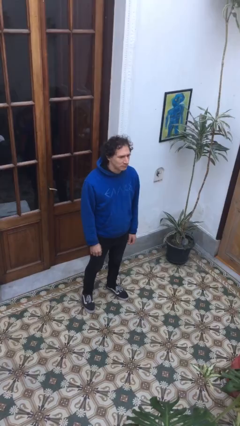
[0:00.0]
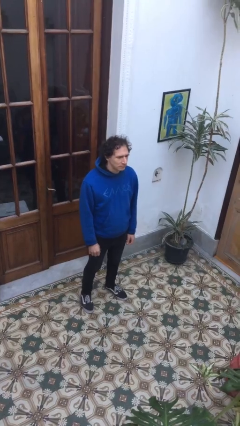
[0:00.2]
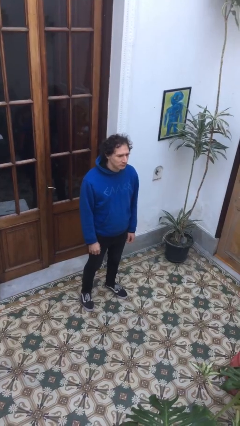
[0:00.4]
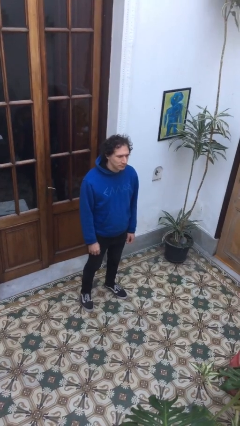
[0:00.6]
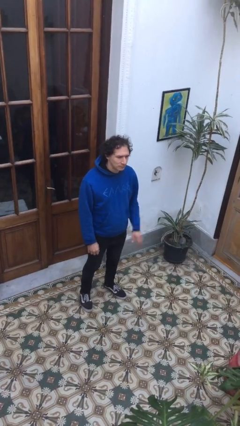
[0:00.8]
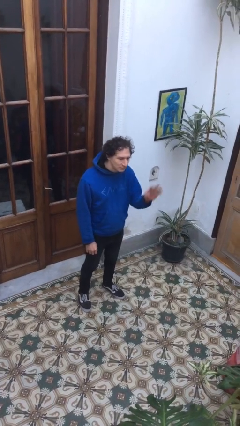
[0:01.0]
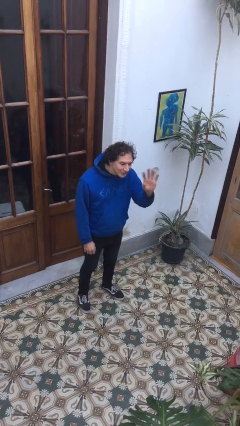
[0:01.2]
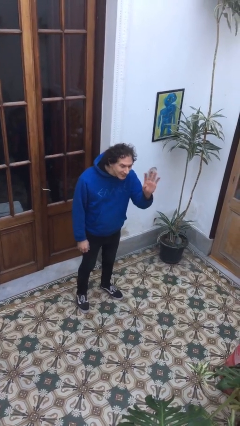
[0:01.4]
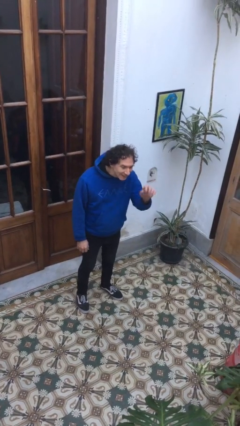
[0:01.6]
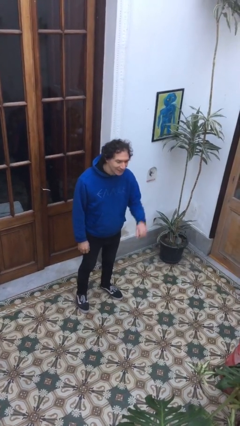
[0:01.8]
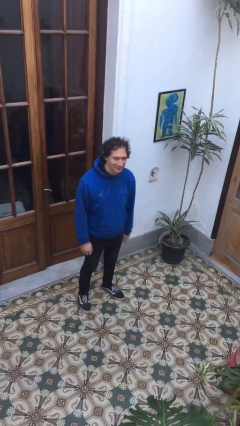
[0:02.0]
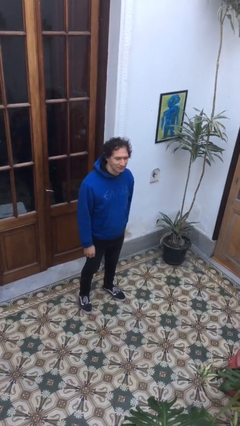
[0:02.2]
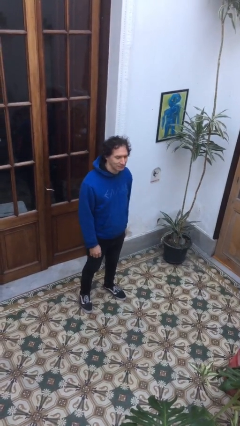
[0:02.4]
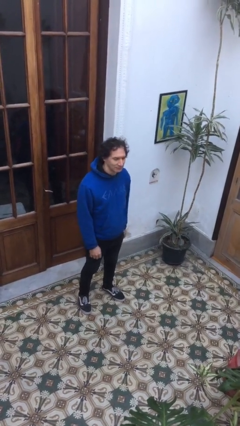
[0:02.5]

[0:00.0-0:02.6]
person waves at person

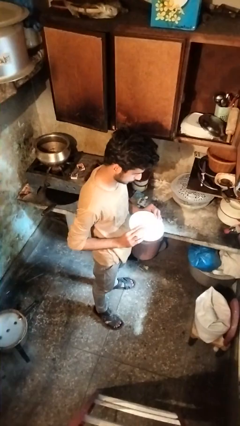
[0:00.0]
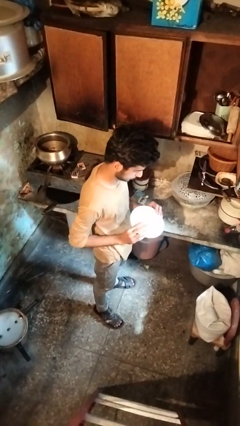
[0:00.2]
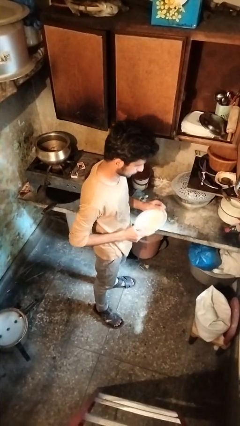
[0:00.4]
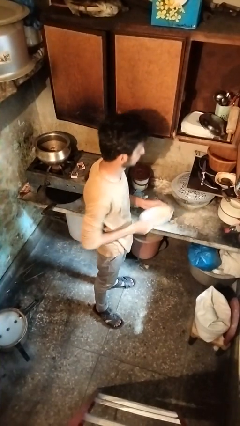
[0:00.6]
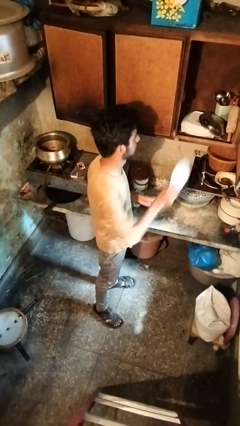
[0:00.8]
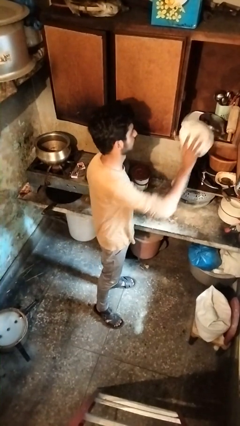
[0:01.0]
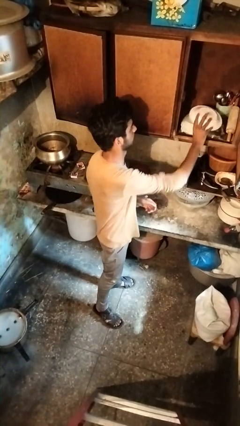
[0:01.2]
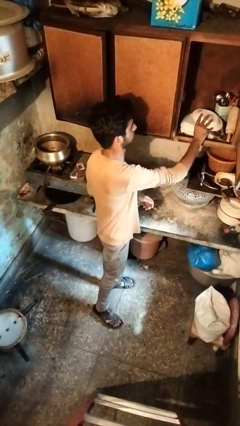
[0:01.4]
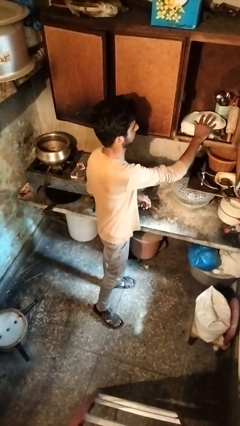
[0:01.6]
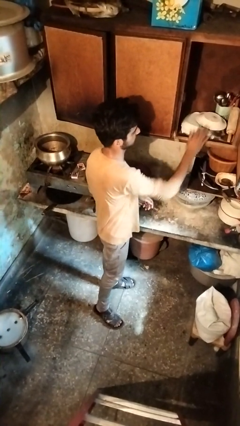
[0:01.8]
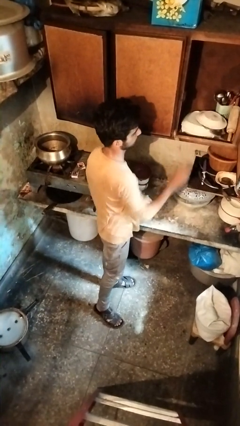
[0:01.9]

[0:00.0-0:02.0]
person puts down object into cabinet

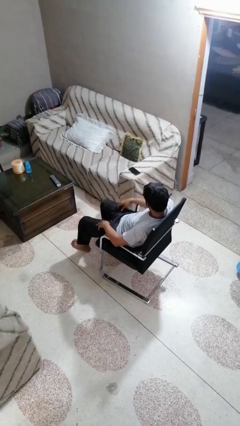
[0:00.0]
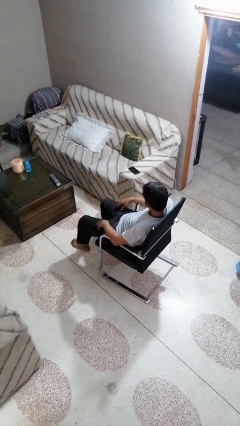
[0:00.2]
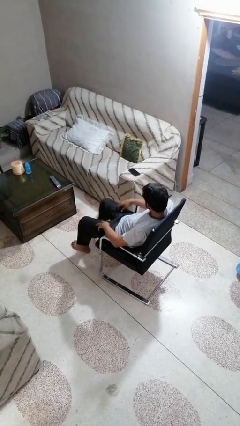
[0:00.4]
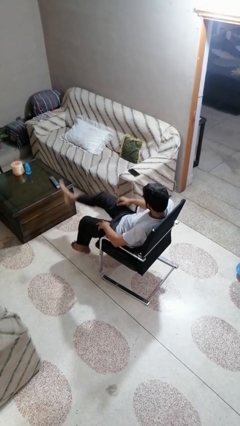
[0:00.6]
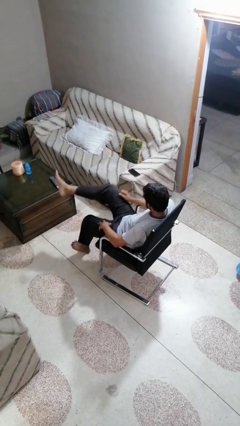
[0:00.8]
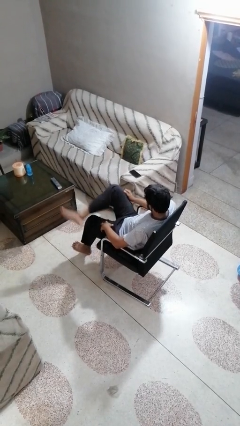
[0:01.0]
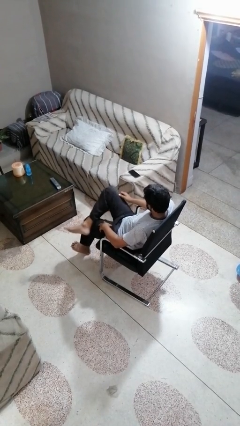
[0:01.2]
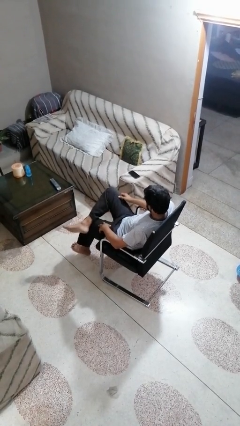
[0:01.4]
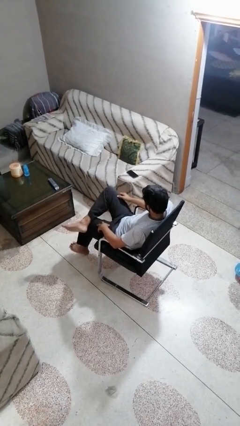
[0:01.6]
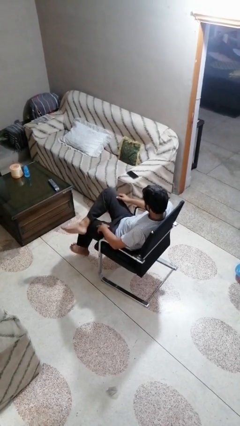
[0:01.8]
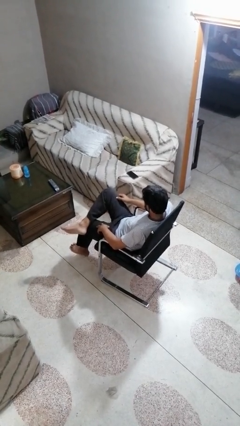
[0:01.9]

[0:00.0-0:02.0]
person crosses legs

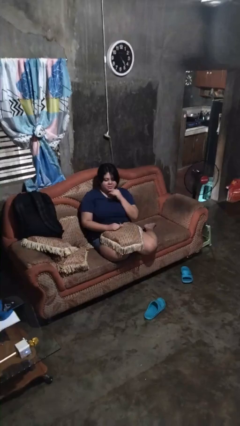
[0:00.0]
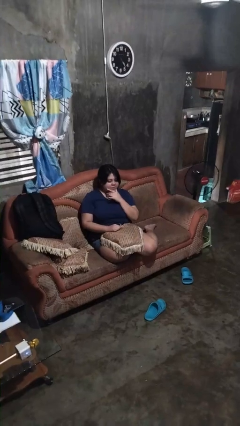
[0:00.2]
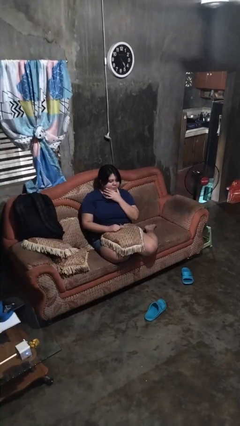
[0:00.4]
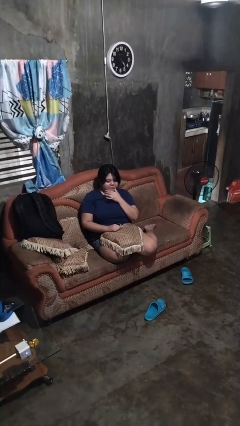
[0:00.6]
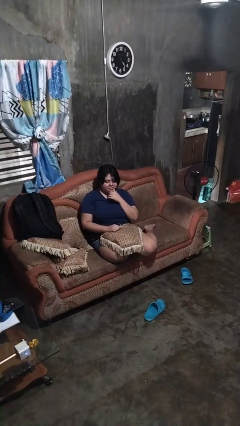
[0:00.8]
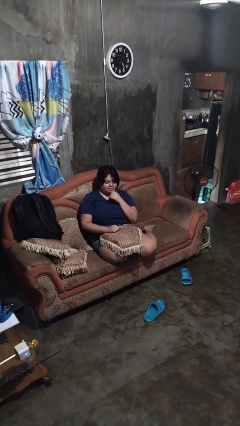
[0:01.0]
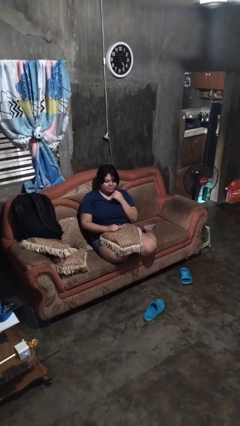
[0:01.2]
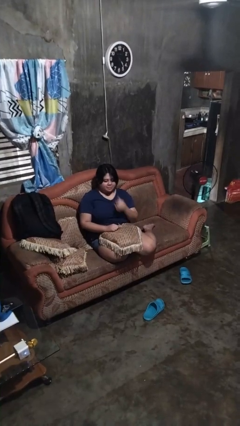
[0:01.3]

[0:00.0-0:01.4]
person strokes chin

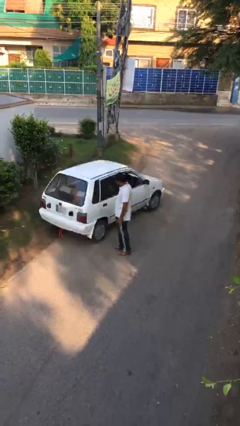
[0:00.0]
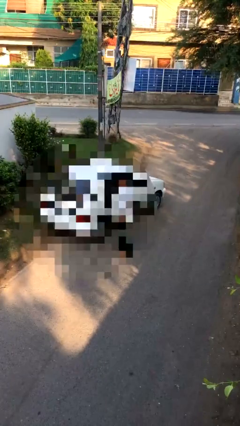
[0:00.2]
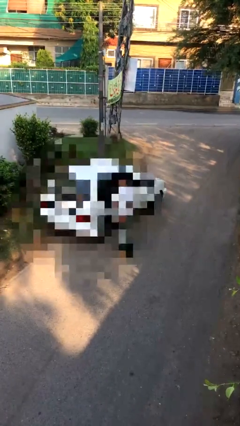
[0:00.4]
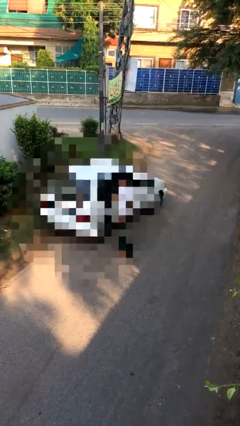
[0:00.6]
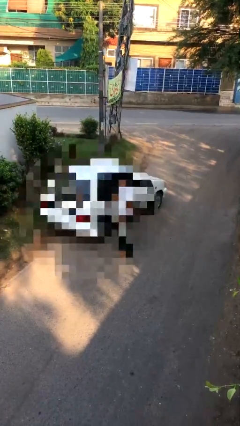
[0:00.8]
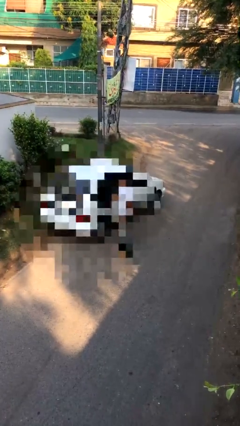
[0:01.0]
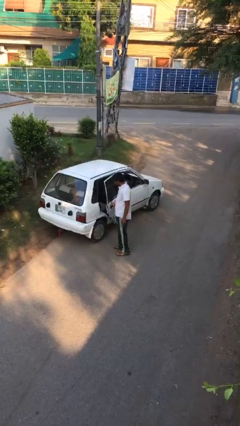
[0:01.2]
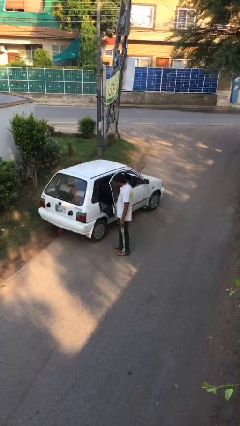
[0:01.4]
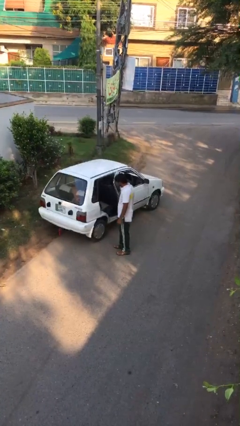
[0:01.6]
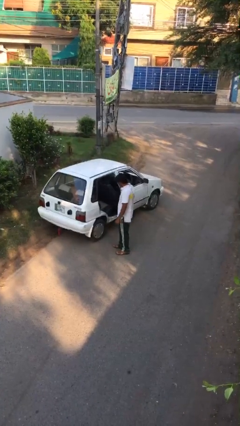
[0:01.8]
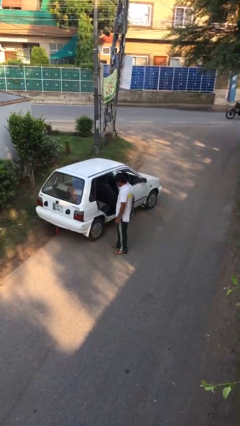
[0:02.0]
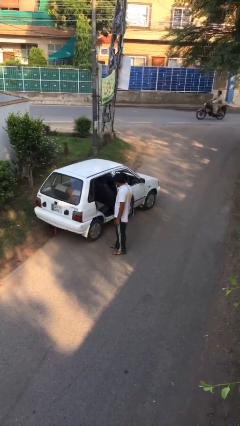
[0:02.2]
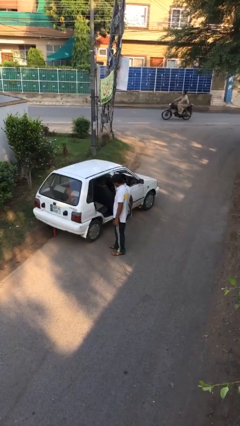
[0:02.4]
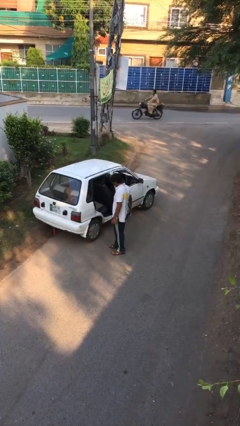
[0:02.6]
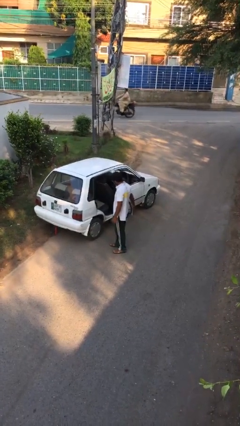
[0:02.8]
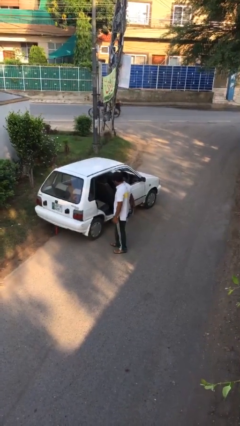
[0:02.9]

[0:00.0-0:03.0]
person opens car door

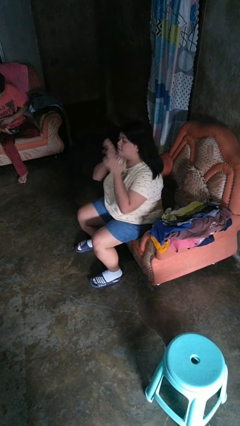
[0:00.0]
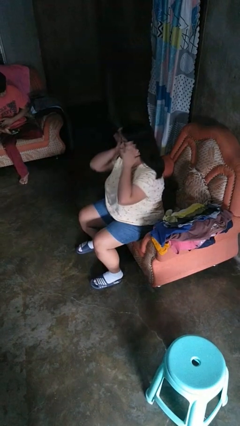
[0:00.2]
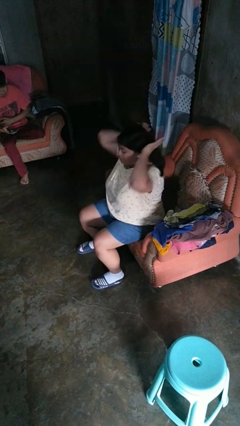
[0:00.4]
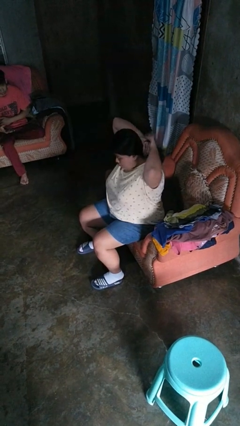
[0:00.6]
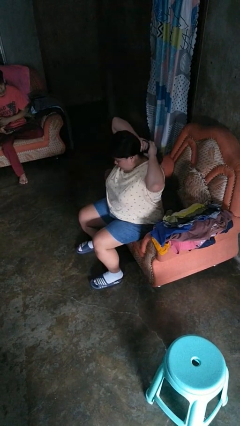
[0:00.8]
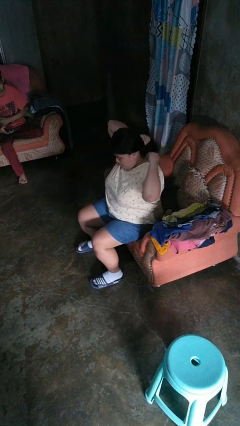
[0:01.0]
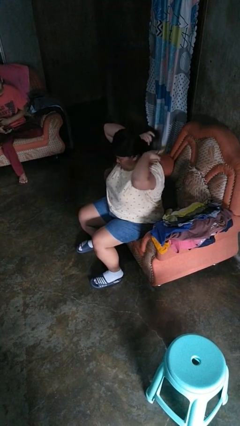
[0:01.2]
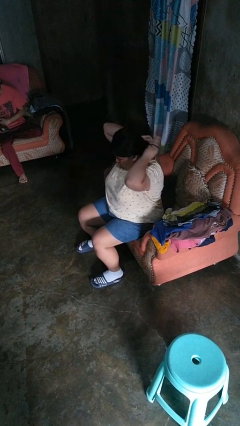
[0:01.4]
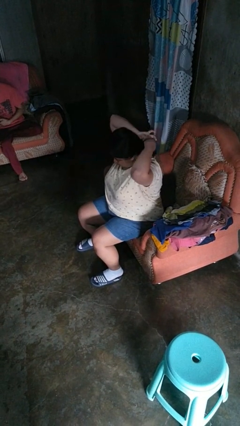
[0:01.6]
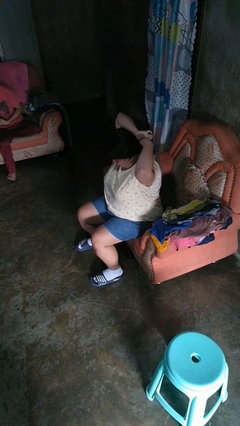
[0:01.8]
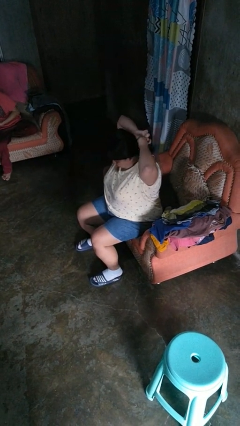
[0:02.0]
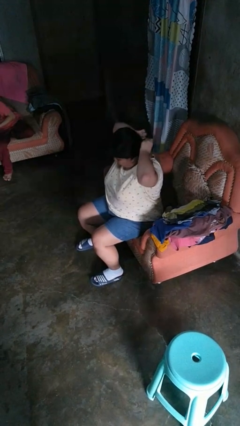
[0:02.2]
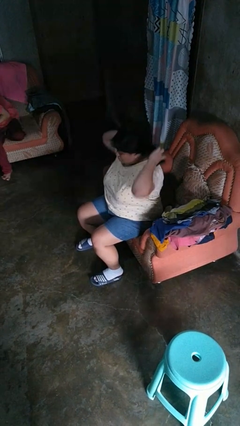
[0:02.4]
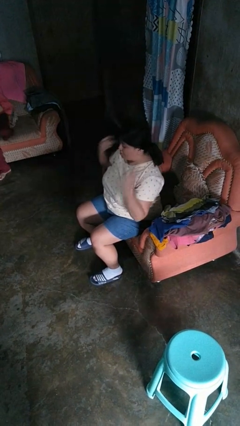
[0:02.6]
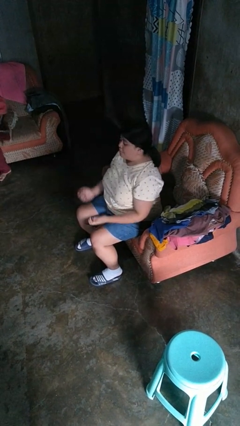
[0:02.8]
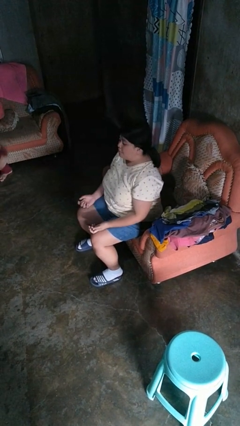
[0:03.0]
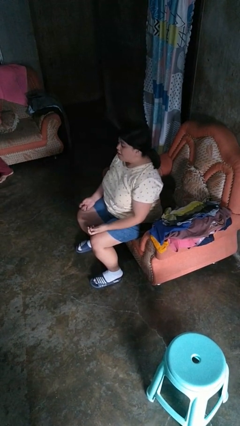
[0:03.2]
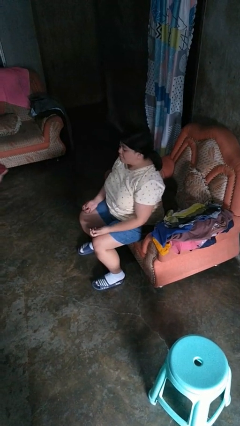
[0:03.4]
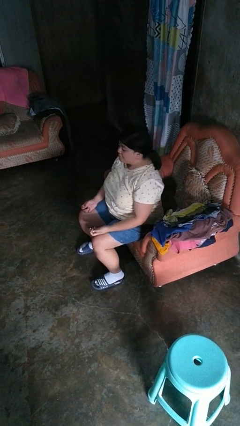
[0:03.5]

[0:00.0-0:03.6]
person puts hair in ponytail

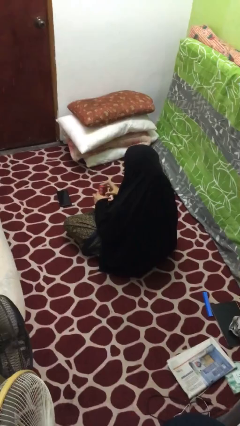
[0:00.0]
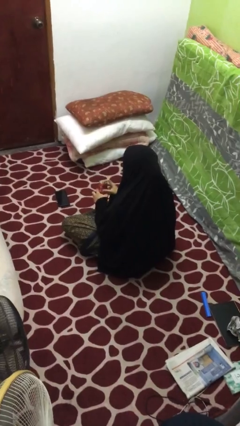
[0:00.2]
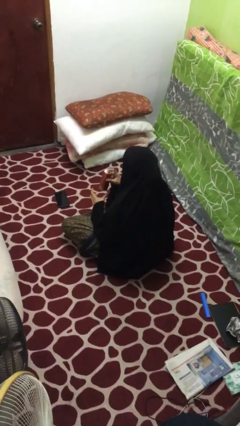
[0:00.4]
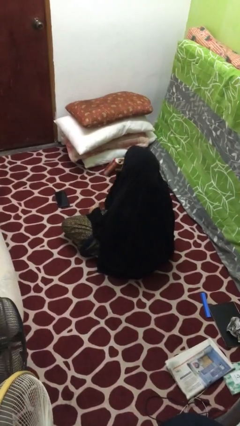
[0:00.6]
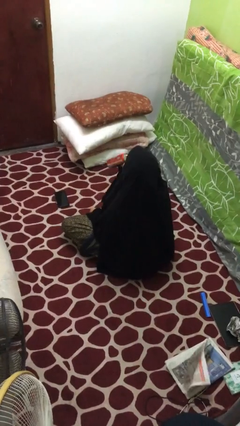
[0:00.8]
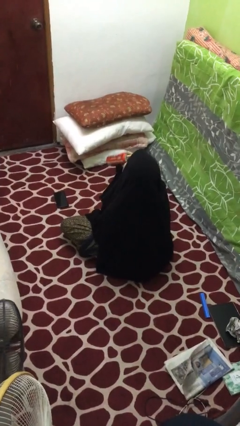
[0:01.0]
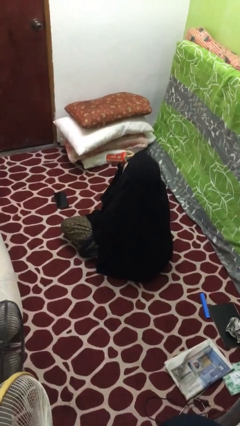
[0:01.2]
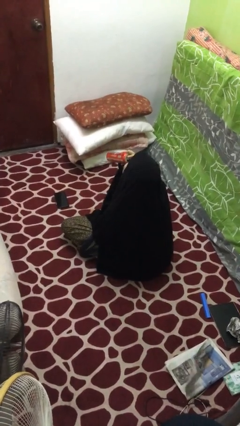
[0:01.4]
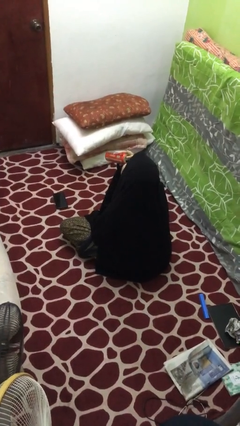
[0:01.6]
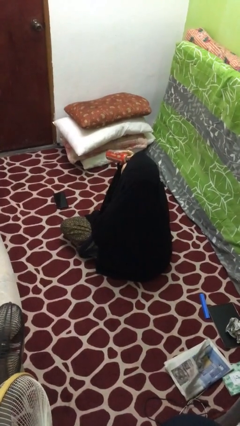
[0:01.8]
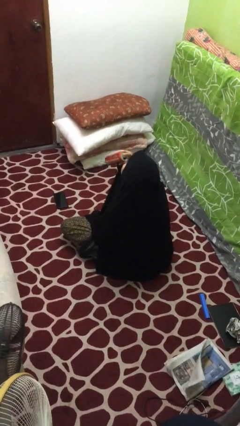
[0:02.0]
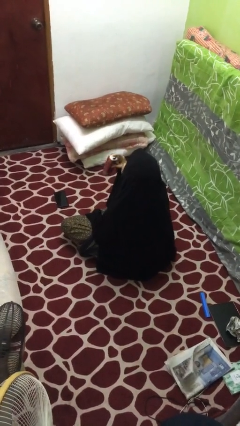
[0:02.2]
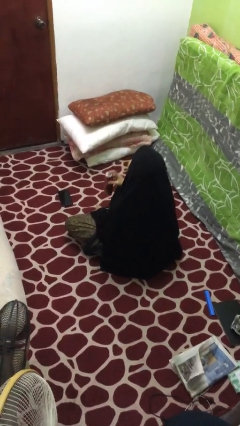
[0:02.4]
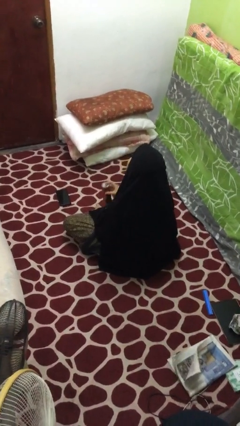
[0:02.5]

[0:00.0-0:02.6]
person drinks from beverage can

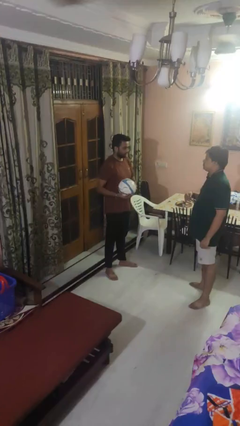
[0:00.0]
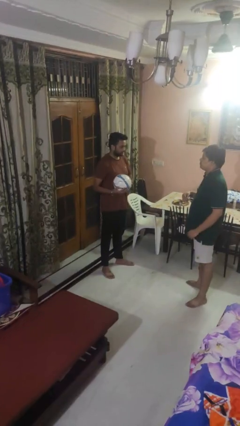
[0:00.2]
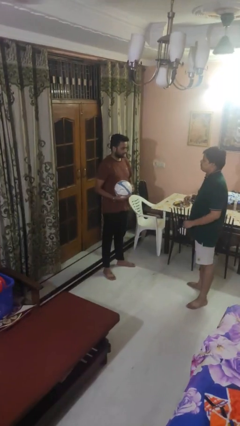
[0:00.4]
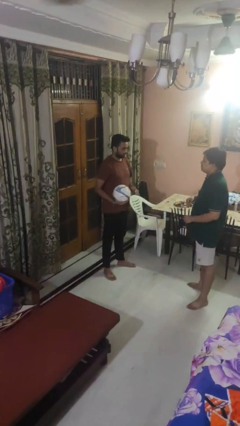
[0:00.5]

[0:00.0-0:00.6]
person catches object from person
